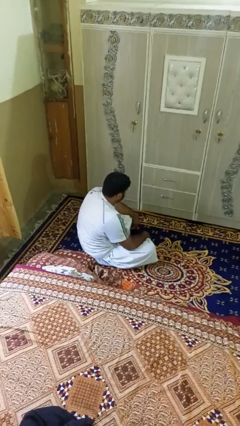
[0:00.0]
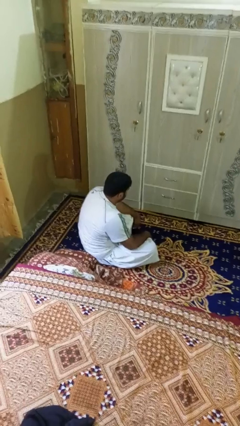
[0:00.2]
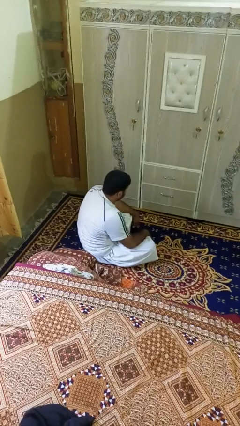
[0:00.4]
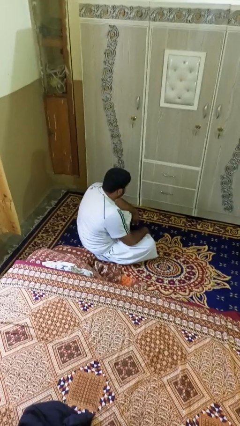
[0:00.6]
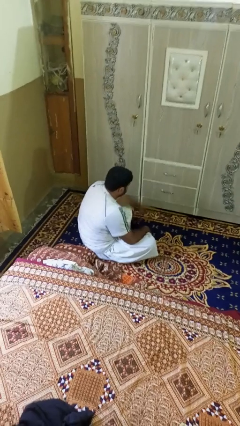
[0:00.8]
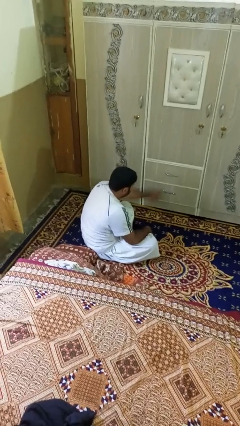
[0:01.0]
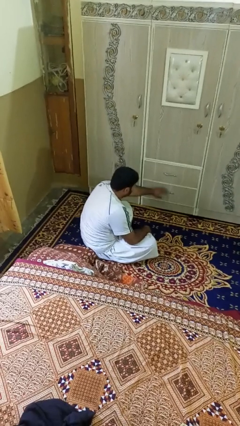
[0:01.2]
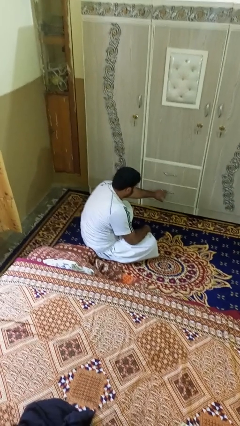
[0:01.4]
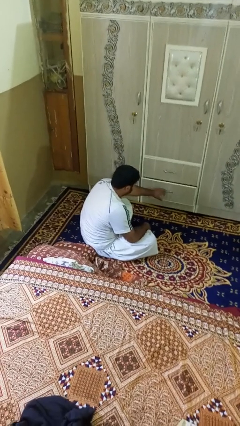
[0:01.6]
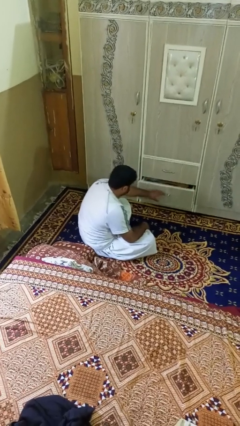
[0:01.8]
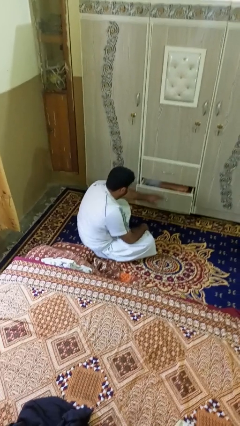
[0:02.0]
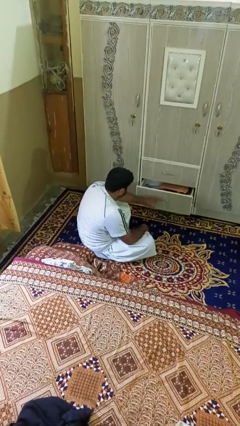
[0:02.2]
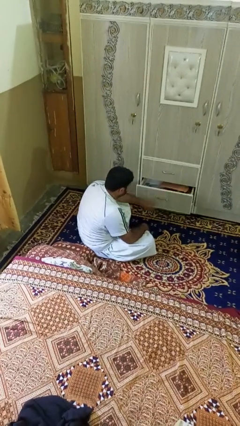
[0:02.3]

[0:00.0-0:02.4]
person opens dresser drawer

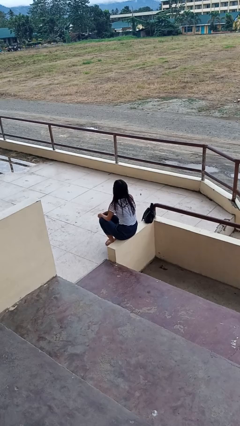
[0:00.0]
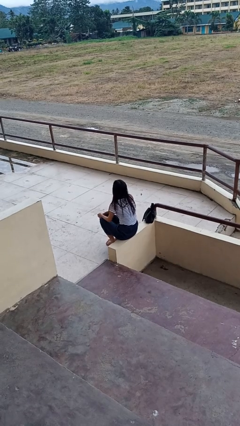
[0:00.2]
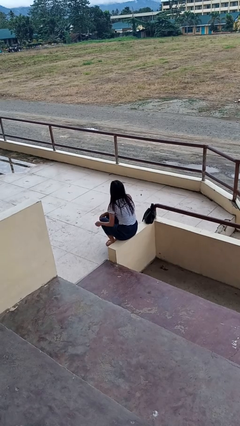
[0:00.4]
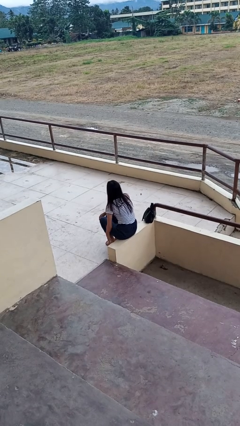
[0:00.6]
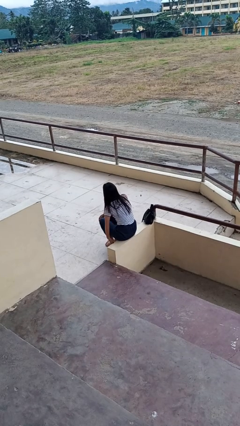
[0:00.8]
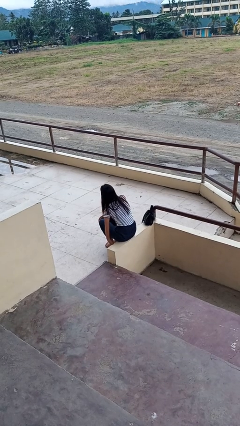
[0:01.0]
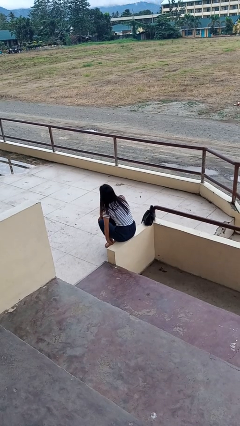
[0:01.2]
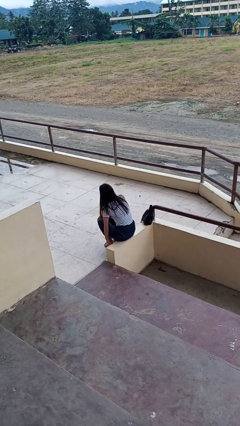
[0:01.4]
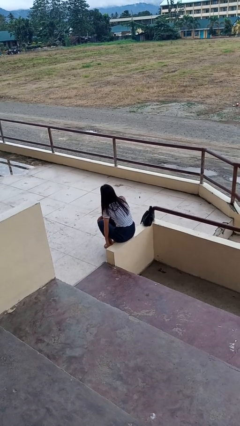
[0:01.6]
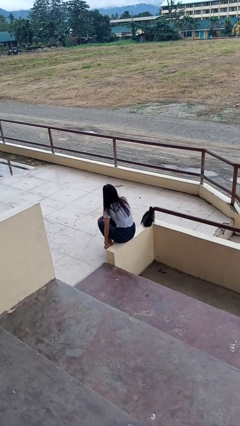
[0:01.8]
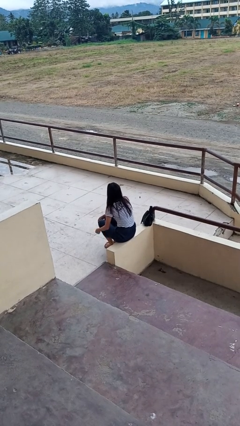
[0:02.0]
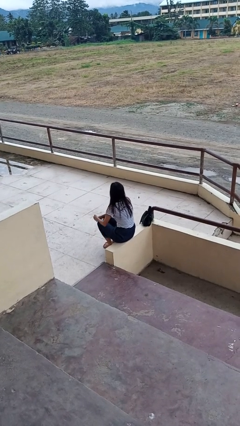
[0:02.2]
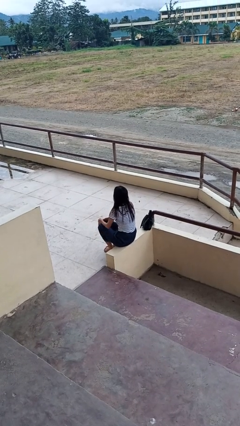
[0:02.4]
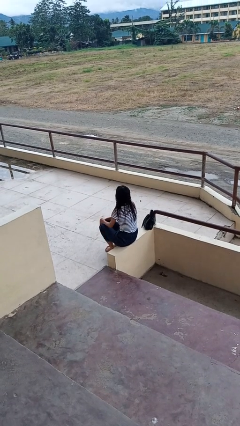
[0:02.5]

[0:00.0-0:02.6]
person rubs foot

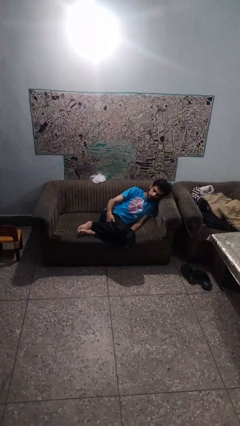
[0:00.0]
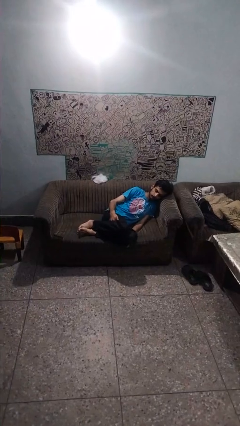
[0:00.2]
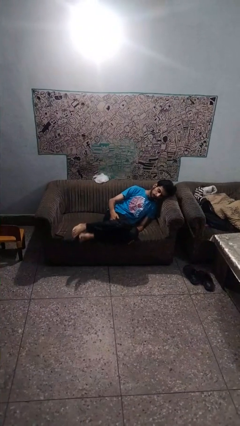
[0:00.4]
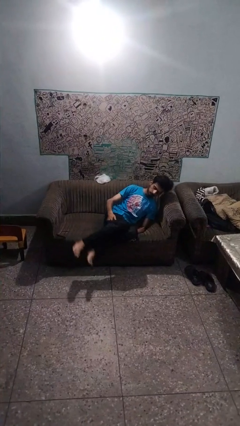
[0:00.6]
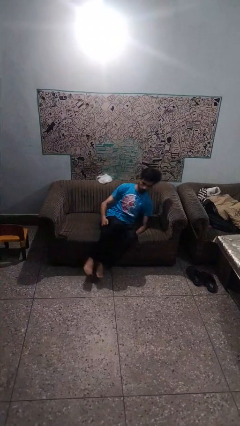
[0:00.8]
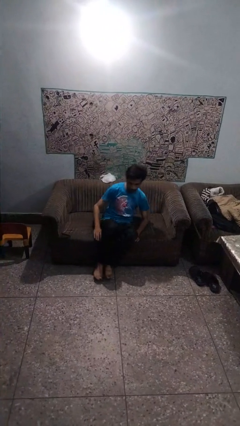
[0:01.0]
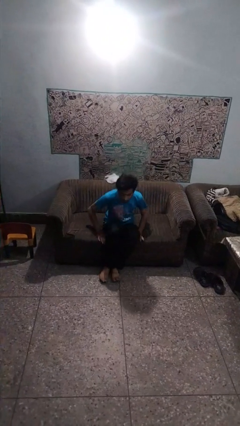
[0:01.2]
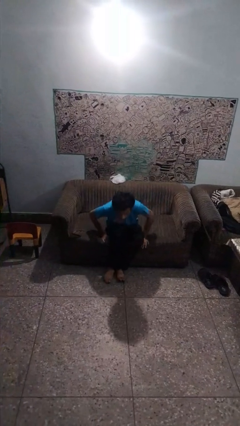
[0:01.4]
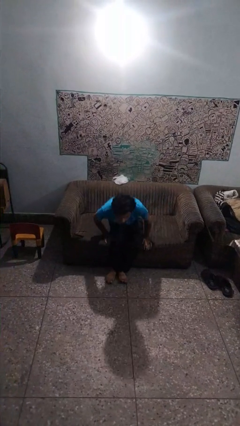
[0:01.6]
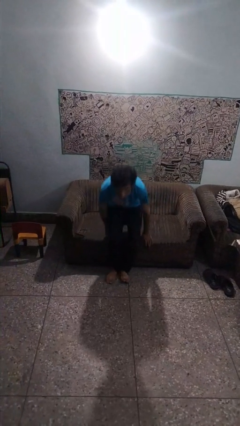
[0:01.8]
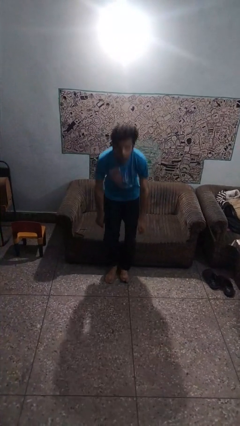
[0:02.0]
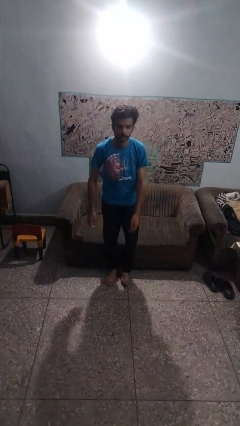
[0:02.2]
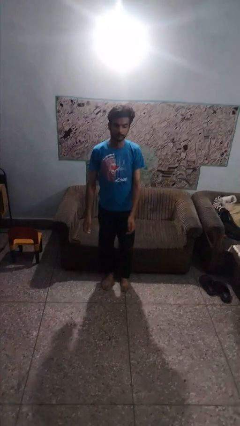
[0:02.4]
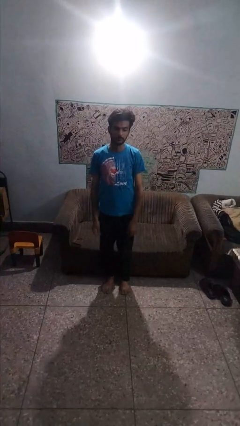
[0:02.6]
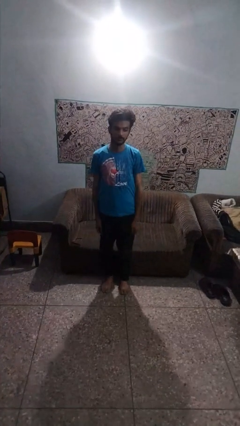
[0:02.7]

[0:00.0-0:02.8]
person stands up

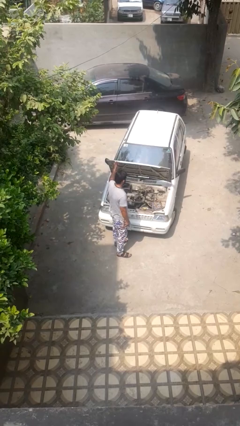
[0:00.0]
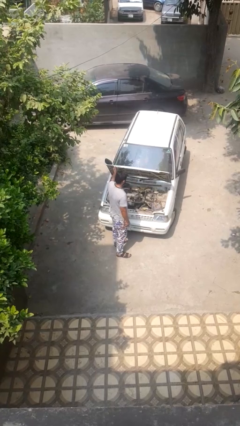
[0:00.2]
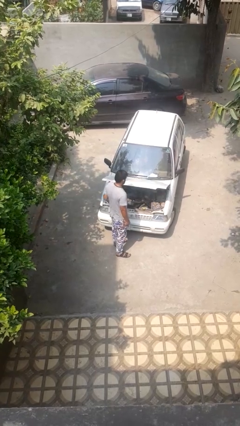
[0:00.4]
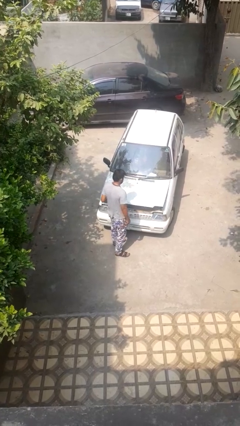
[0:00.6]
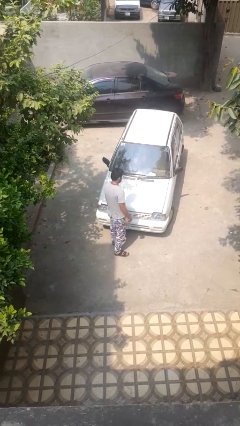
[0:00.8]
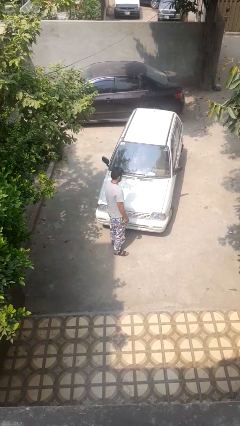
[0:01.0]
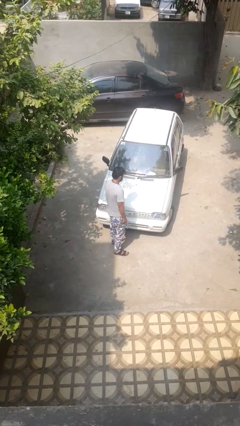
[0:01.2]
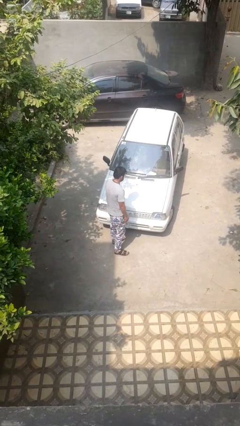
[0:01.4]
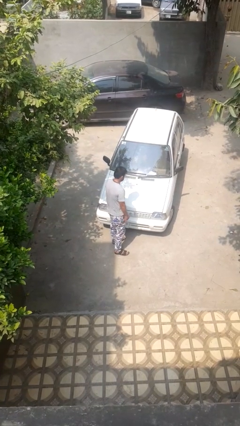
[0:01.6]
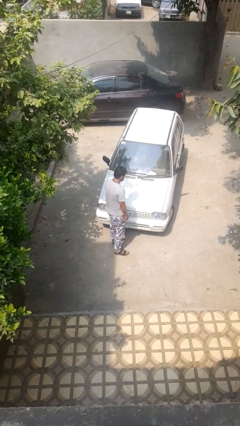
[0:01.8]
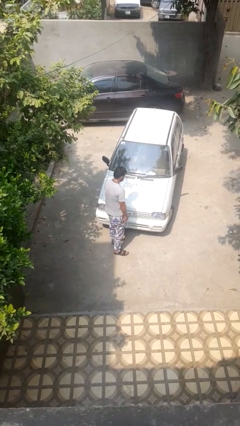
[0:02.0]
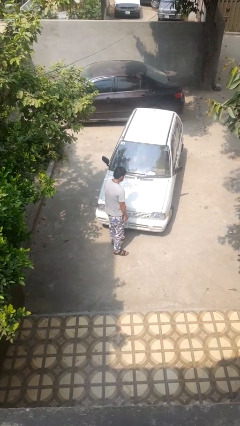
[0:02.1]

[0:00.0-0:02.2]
person closes car hood

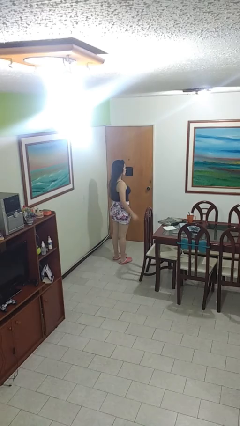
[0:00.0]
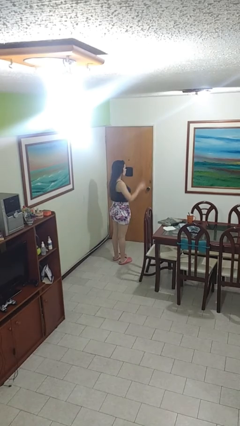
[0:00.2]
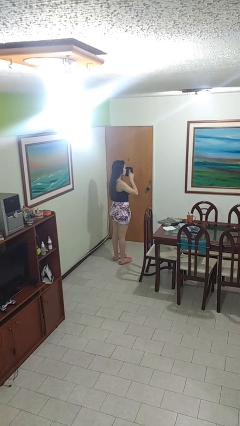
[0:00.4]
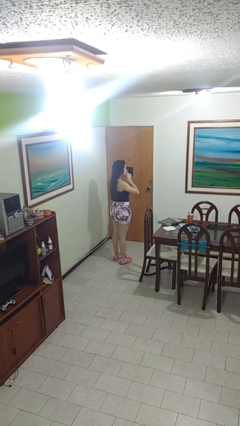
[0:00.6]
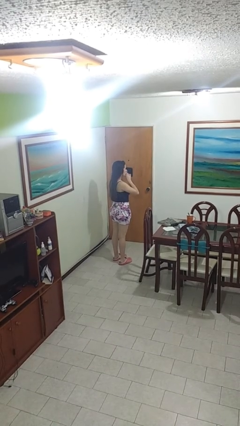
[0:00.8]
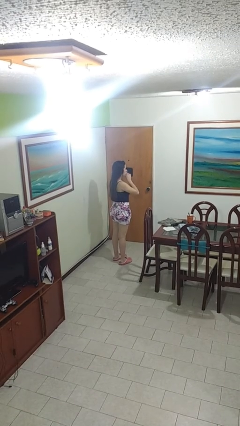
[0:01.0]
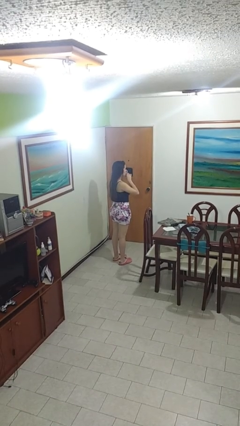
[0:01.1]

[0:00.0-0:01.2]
person gestures be quiet

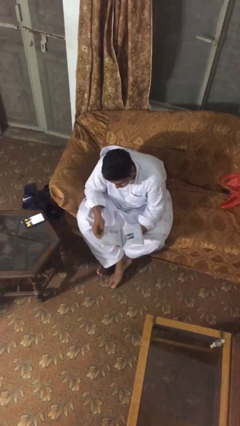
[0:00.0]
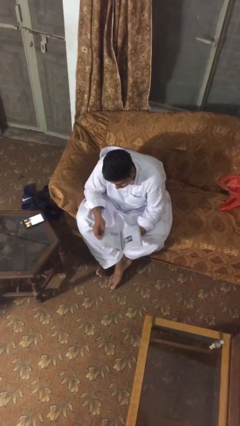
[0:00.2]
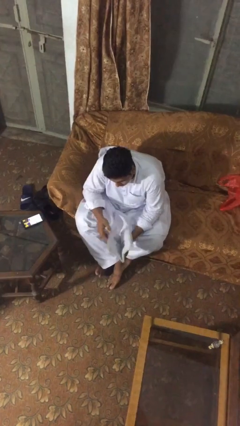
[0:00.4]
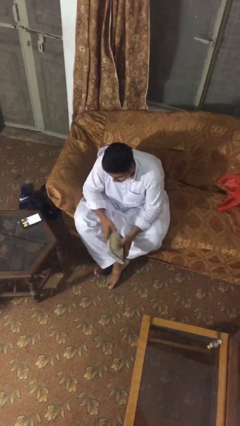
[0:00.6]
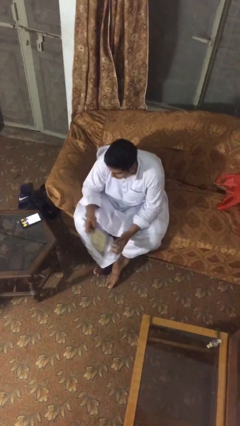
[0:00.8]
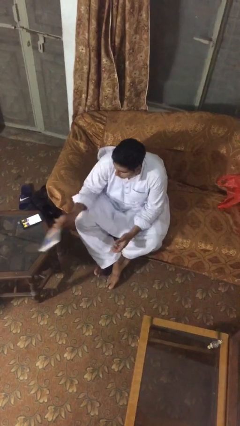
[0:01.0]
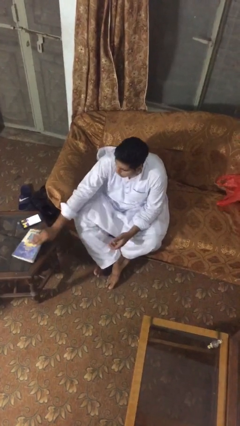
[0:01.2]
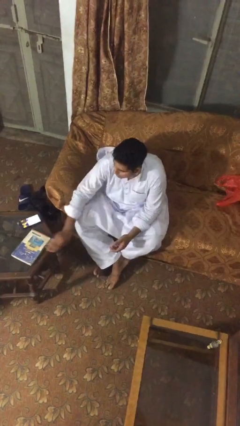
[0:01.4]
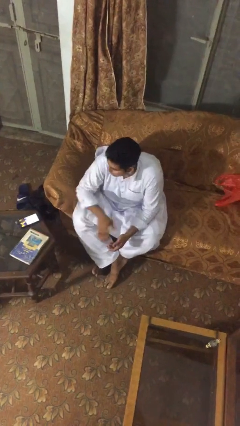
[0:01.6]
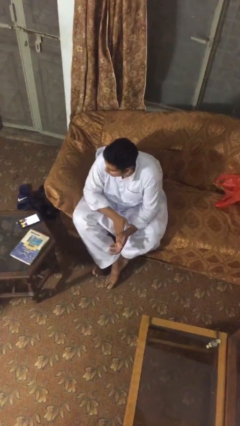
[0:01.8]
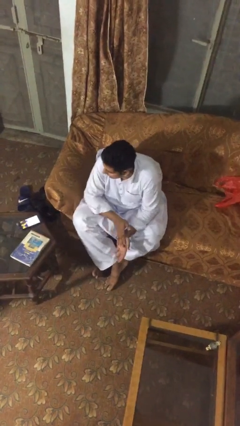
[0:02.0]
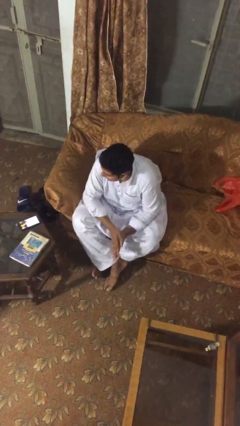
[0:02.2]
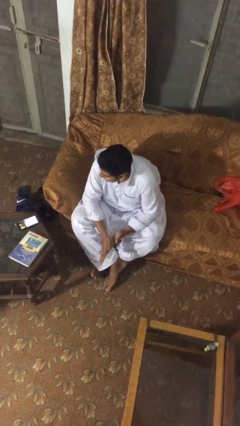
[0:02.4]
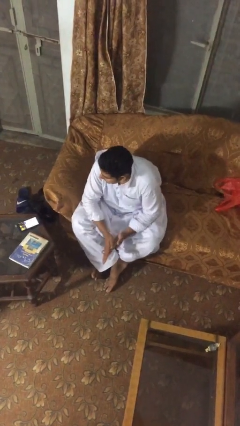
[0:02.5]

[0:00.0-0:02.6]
person puts down object on table

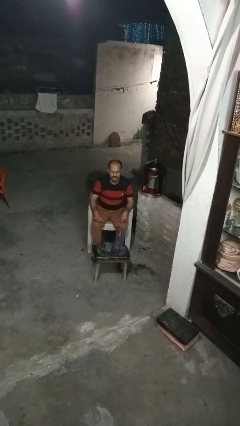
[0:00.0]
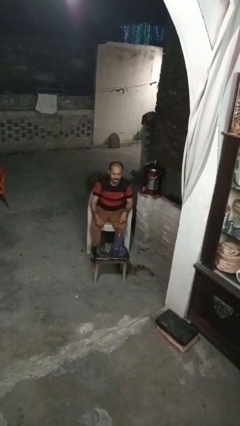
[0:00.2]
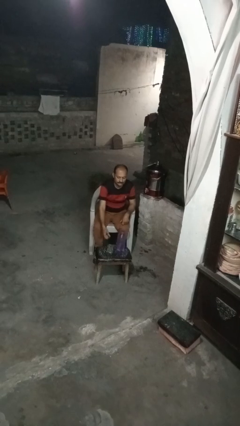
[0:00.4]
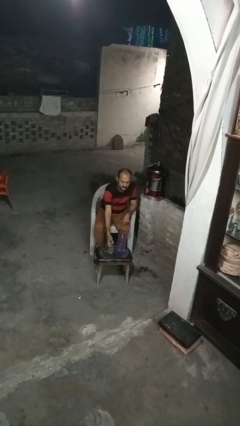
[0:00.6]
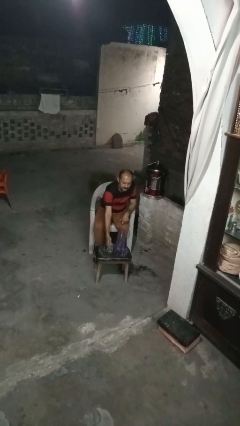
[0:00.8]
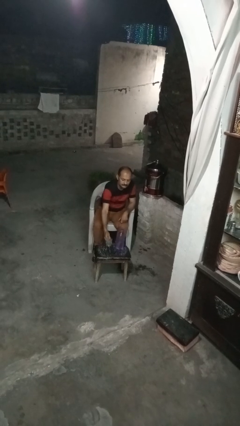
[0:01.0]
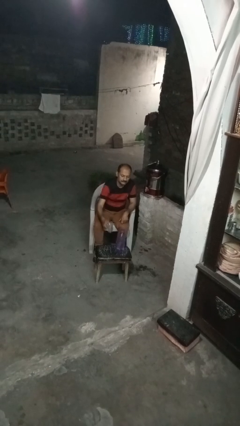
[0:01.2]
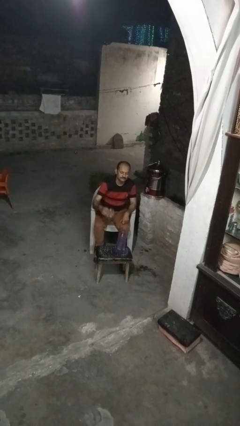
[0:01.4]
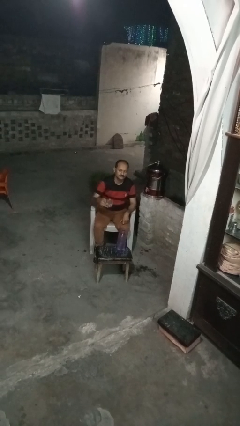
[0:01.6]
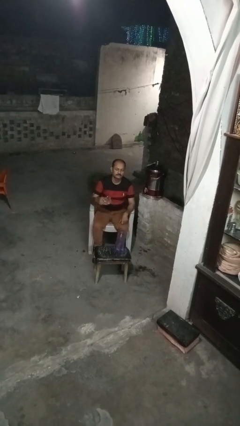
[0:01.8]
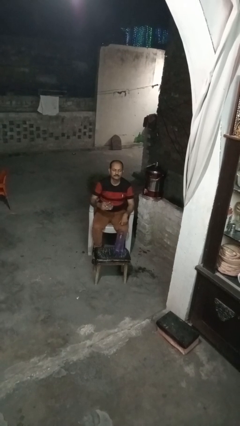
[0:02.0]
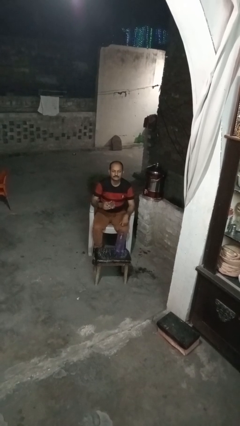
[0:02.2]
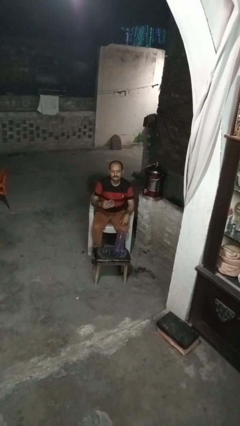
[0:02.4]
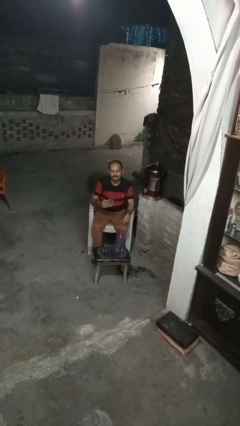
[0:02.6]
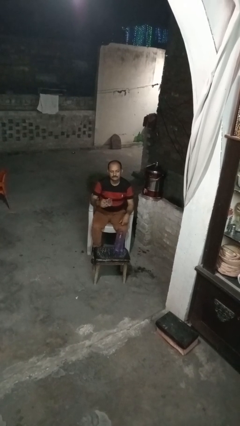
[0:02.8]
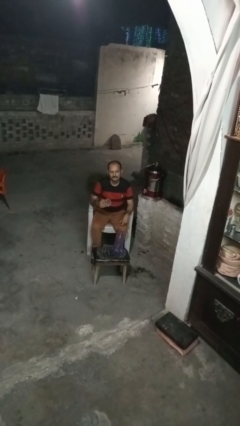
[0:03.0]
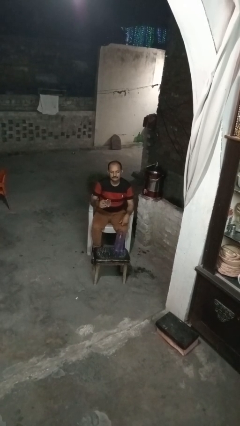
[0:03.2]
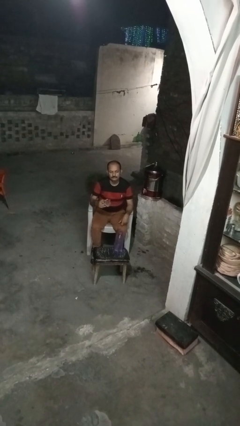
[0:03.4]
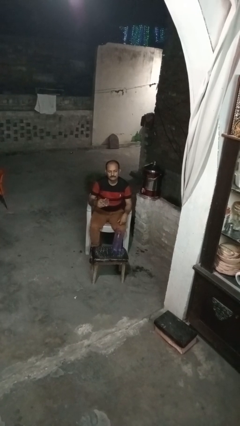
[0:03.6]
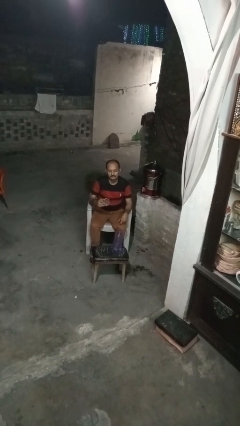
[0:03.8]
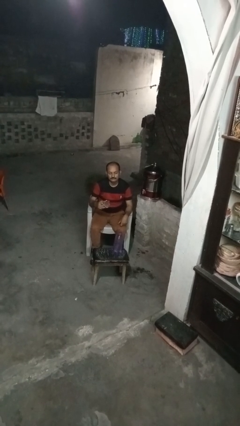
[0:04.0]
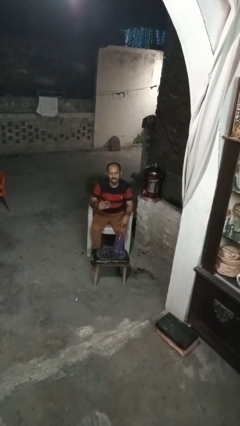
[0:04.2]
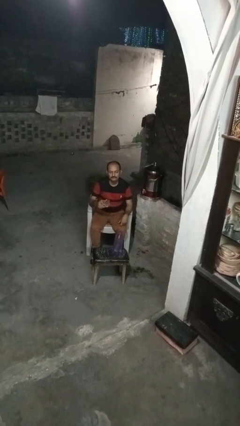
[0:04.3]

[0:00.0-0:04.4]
person picks up object from table
